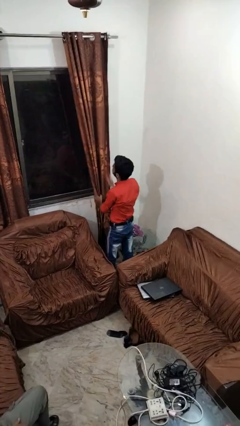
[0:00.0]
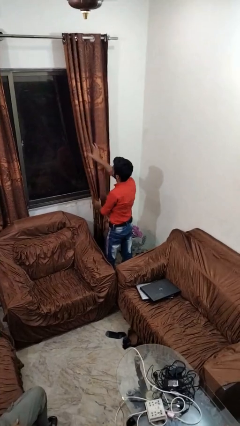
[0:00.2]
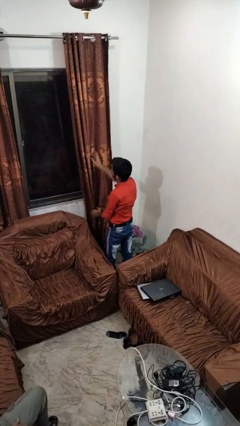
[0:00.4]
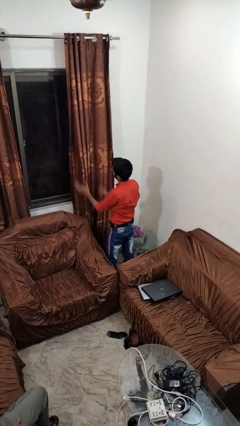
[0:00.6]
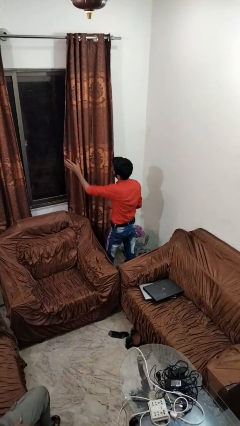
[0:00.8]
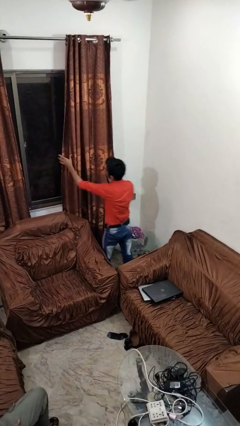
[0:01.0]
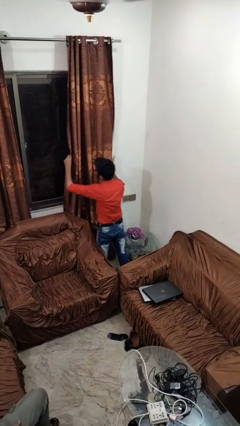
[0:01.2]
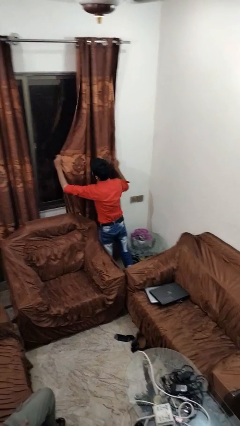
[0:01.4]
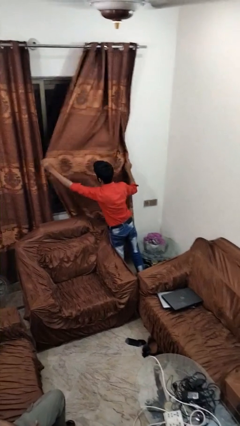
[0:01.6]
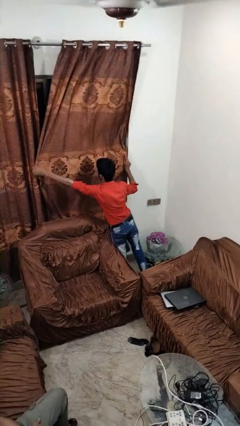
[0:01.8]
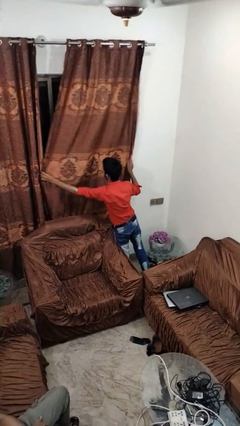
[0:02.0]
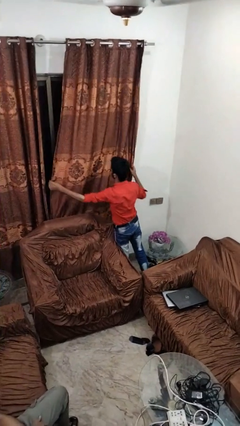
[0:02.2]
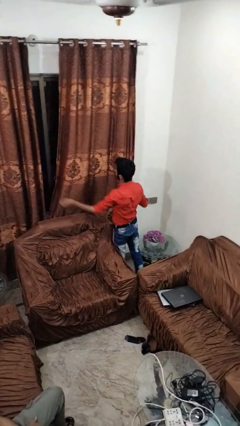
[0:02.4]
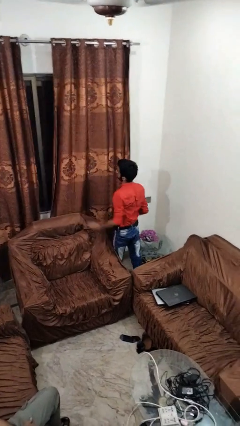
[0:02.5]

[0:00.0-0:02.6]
person closes curtains

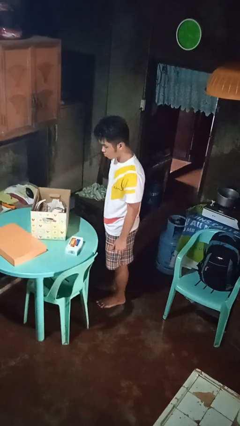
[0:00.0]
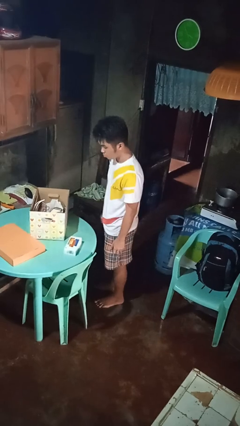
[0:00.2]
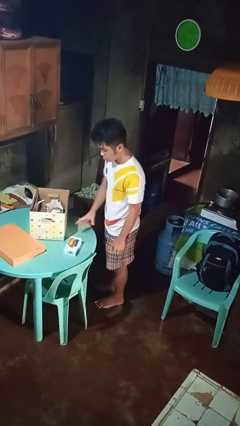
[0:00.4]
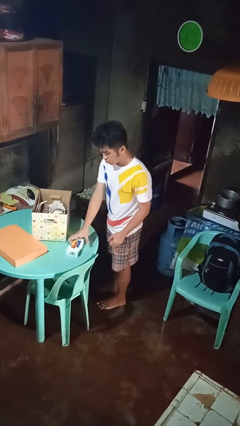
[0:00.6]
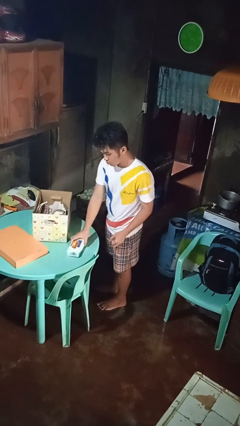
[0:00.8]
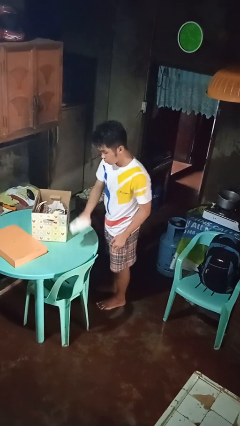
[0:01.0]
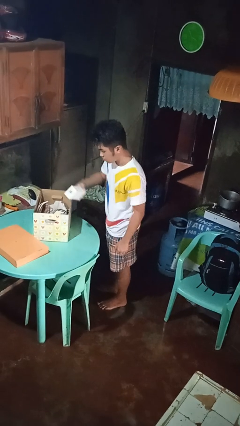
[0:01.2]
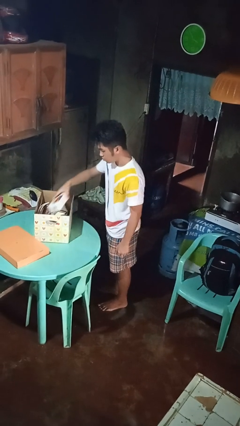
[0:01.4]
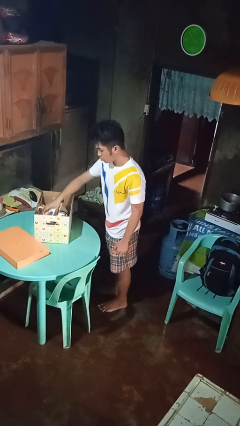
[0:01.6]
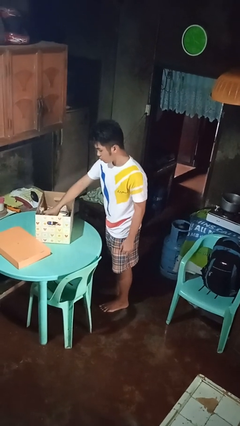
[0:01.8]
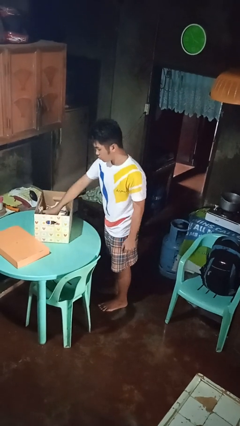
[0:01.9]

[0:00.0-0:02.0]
person puts object into box

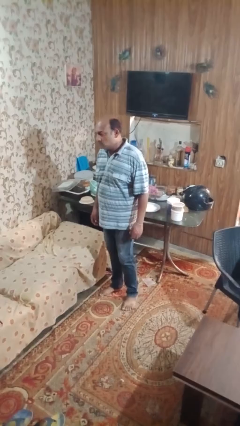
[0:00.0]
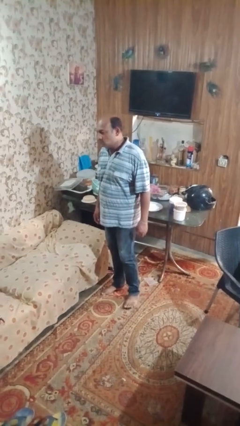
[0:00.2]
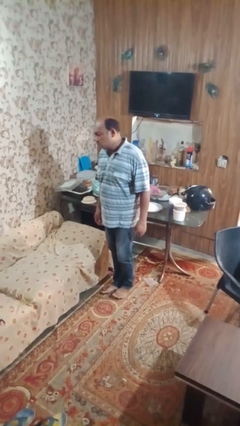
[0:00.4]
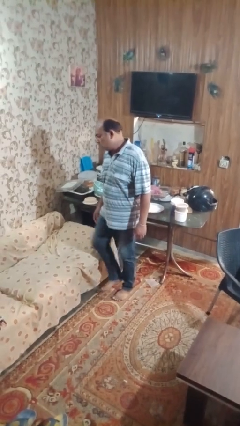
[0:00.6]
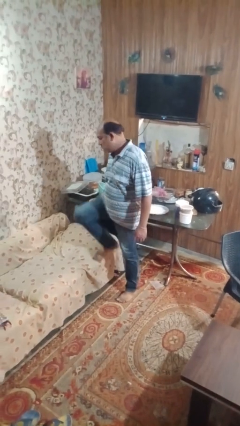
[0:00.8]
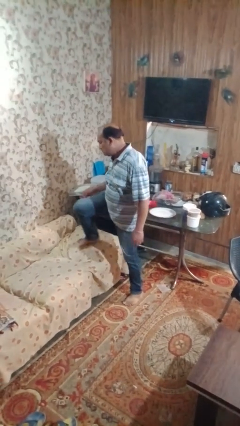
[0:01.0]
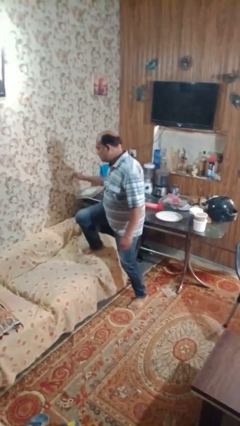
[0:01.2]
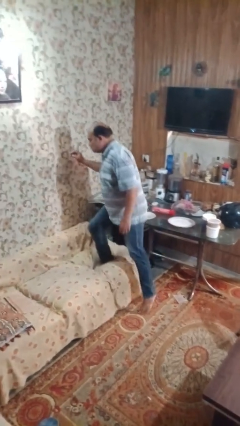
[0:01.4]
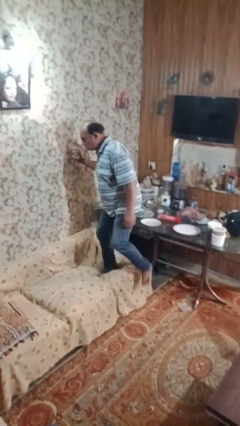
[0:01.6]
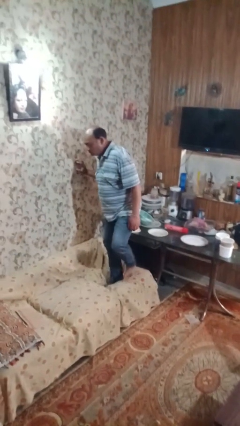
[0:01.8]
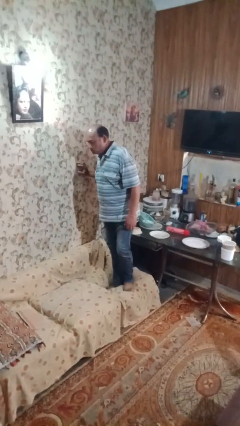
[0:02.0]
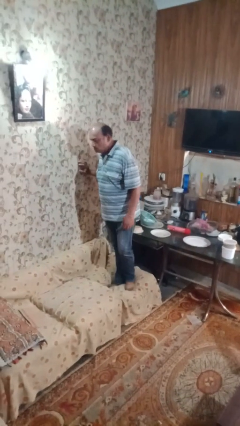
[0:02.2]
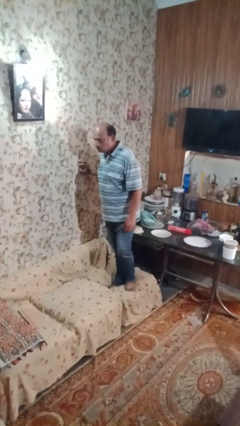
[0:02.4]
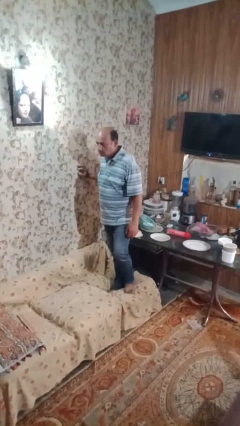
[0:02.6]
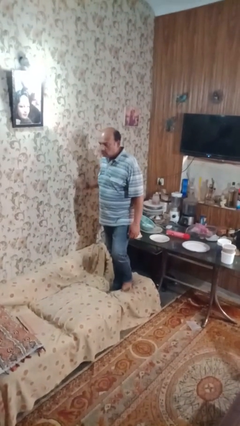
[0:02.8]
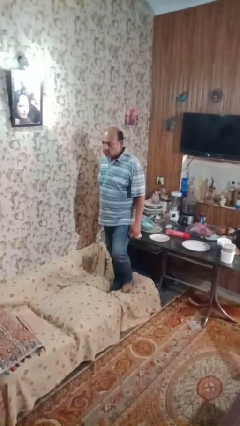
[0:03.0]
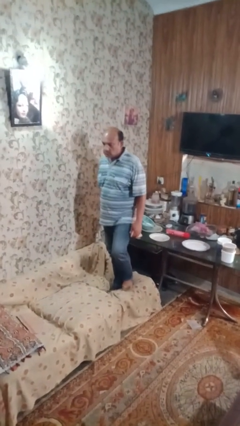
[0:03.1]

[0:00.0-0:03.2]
person climbs on couch

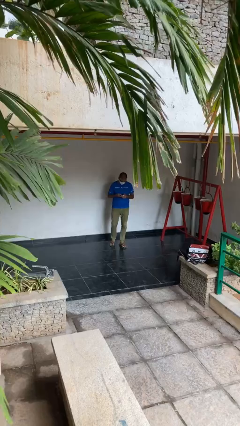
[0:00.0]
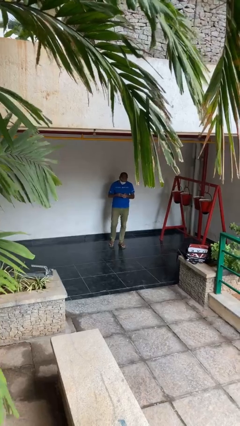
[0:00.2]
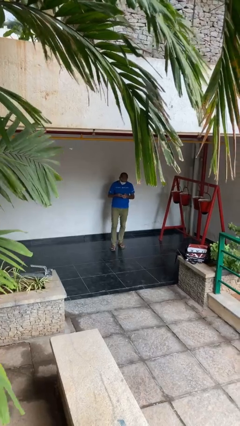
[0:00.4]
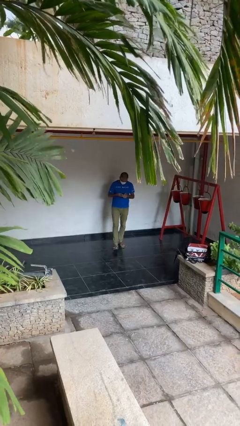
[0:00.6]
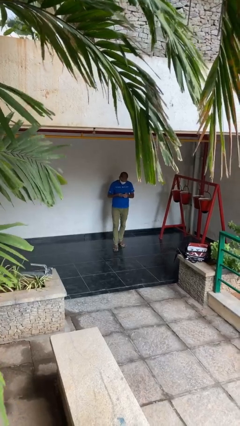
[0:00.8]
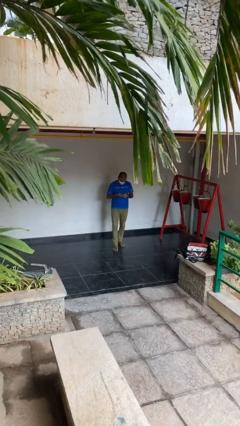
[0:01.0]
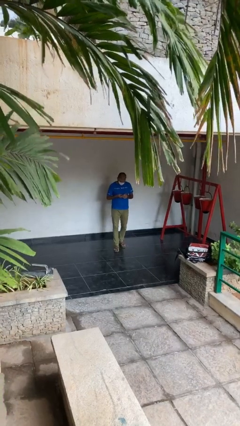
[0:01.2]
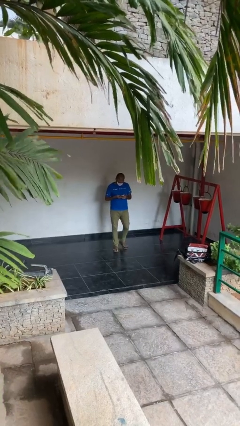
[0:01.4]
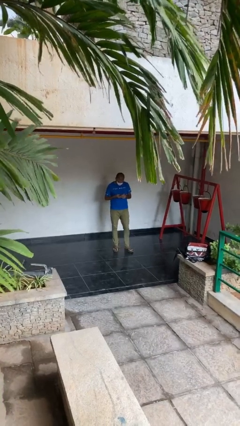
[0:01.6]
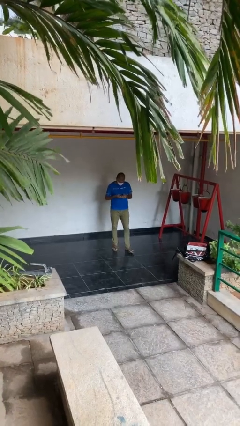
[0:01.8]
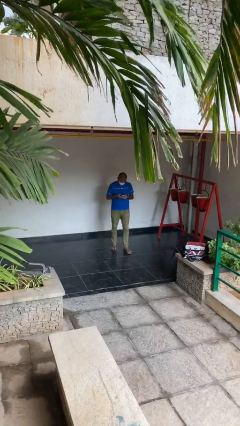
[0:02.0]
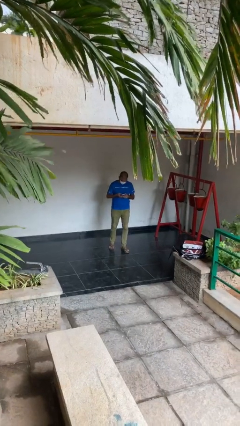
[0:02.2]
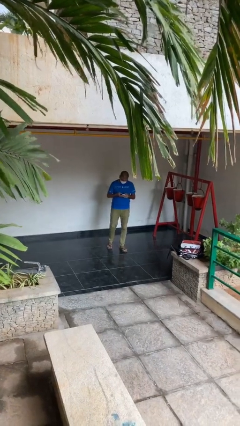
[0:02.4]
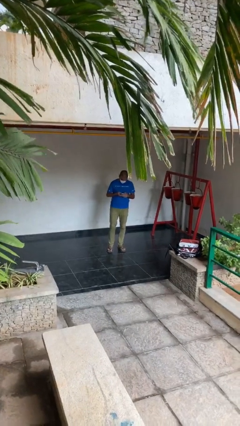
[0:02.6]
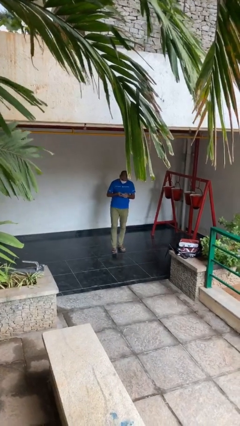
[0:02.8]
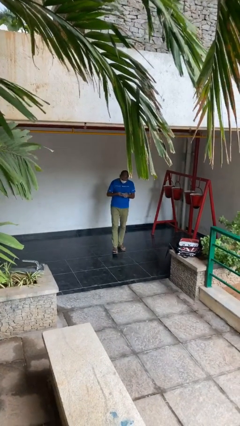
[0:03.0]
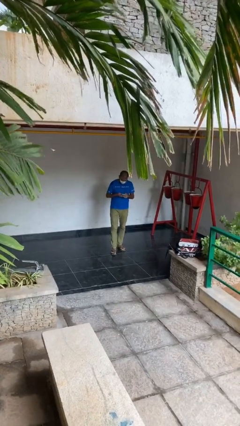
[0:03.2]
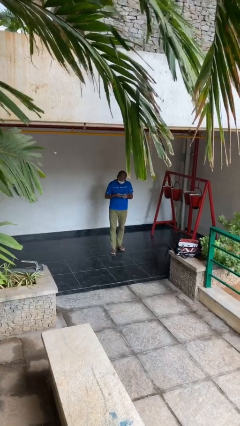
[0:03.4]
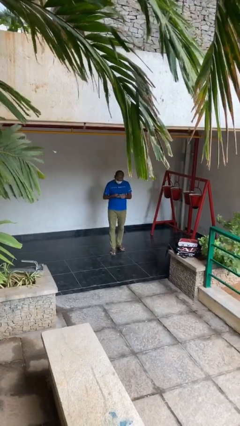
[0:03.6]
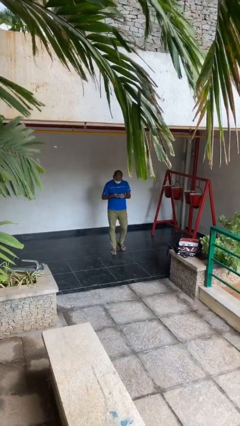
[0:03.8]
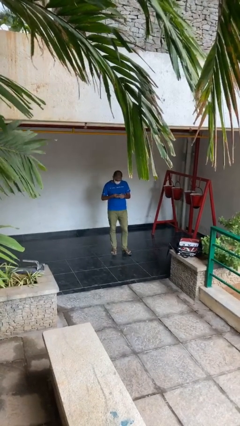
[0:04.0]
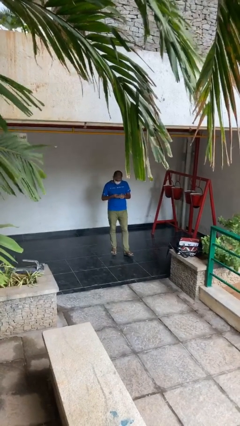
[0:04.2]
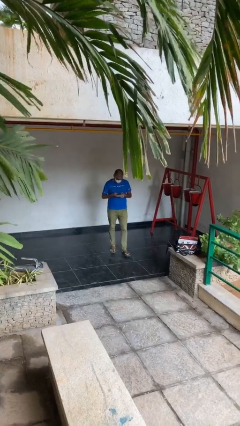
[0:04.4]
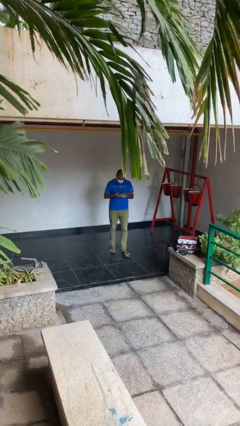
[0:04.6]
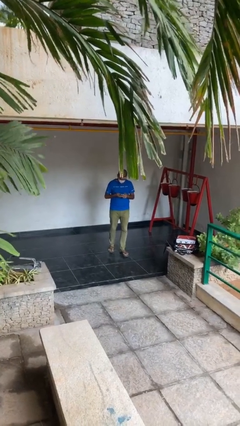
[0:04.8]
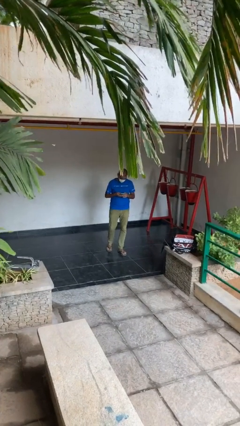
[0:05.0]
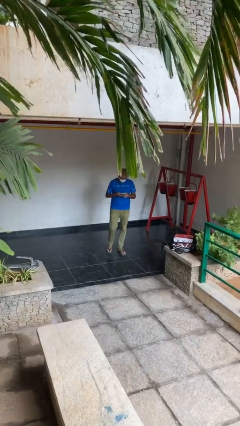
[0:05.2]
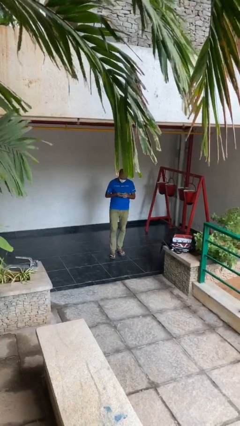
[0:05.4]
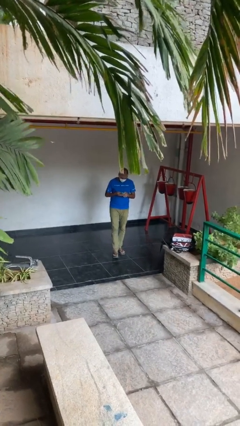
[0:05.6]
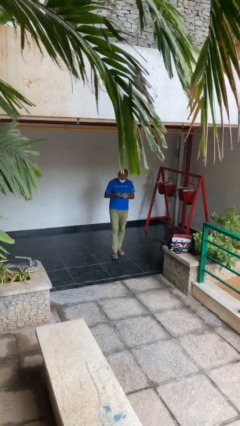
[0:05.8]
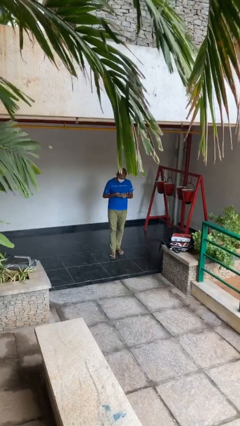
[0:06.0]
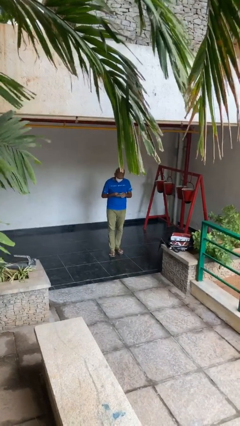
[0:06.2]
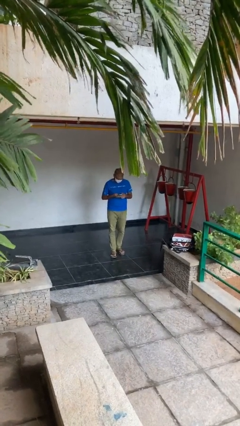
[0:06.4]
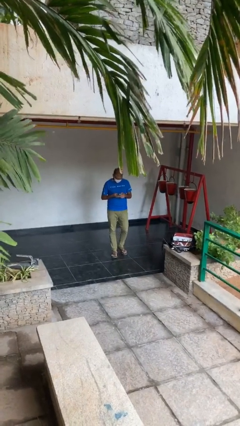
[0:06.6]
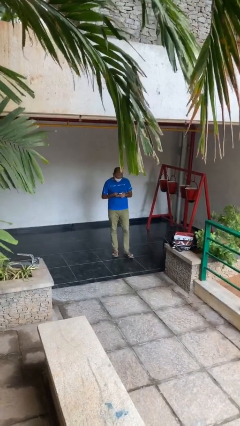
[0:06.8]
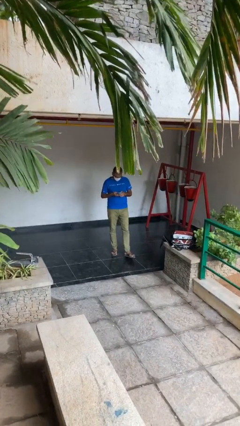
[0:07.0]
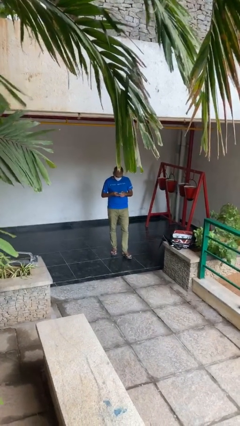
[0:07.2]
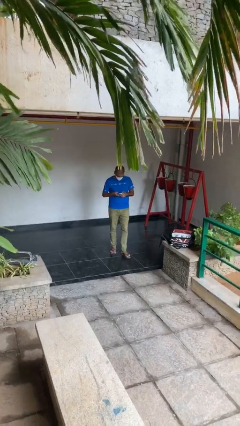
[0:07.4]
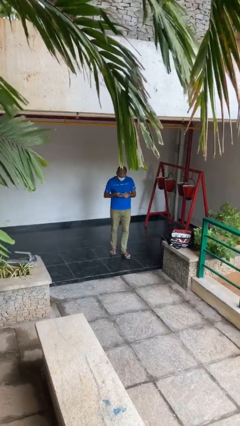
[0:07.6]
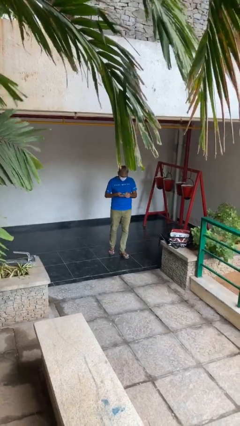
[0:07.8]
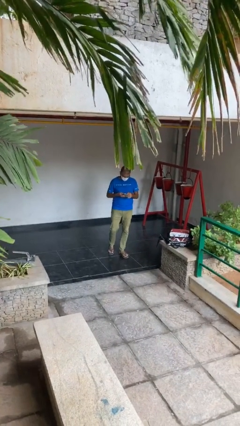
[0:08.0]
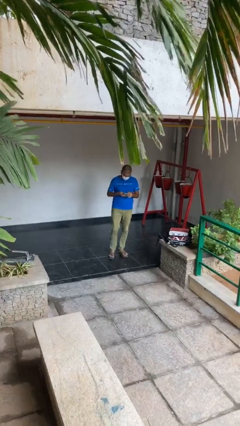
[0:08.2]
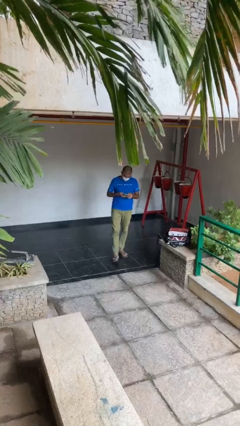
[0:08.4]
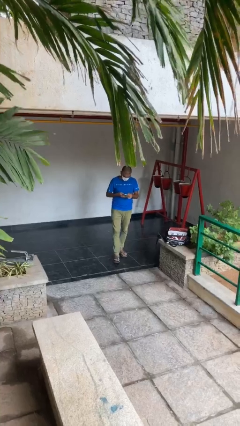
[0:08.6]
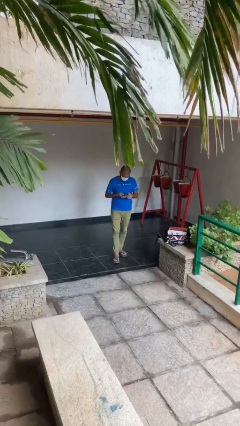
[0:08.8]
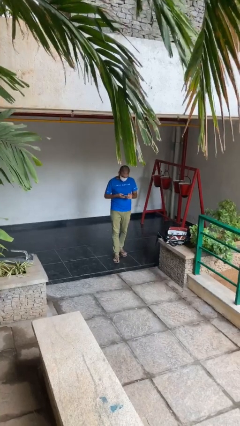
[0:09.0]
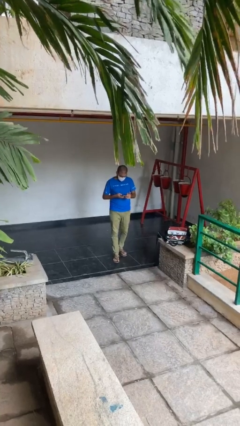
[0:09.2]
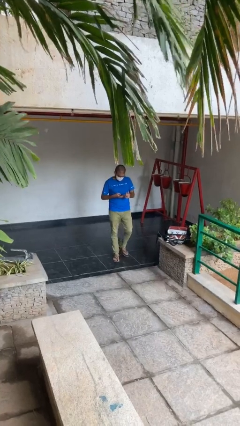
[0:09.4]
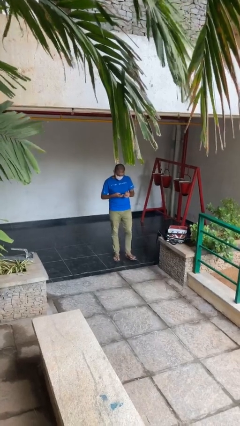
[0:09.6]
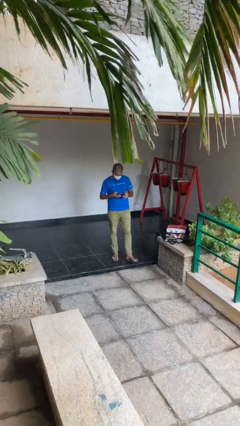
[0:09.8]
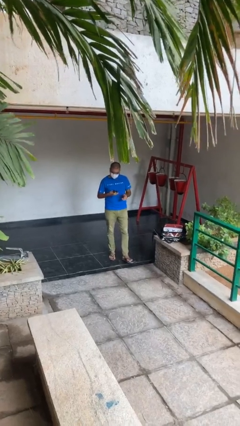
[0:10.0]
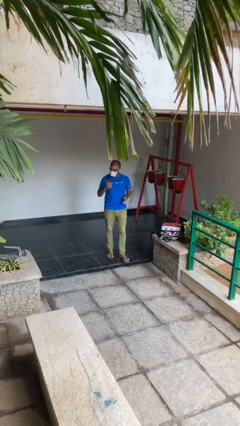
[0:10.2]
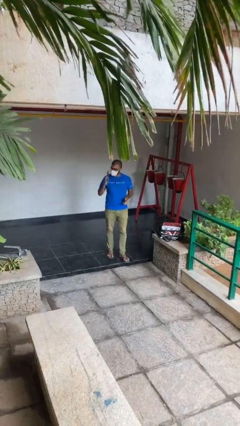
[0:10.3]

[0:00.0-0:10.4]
person texts on phone
